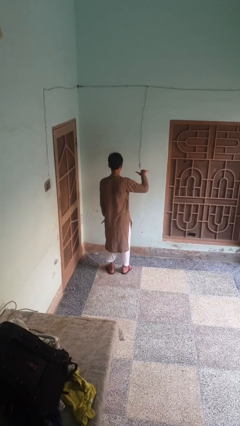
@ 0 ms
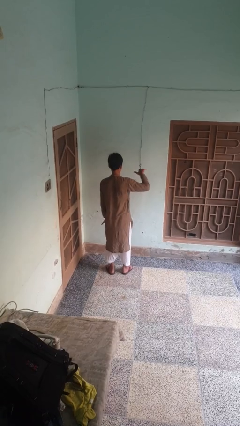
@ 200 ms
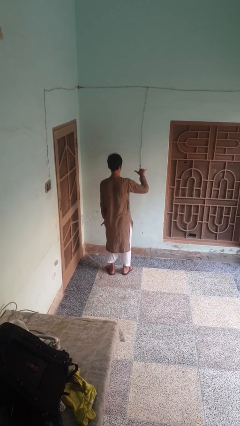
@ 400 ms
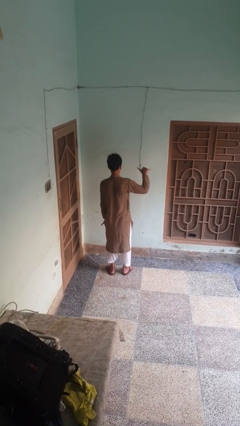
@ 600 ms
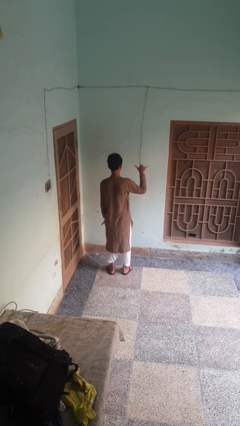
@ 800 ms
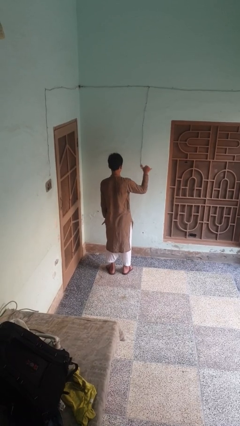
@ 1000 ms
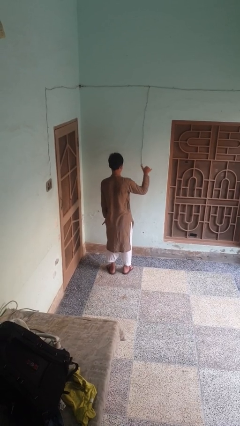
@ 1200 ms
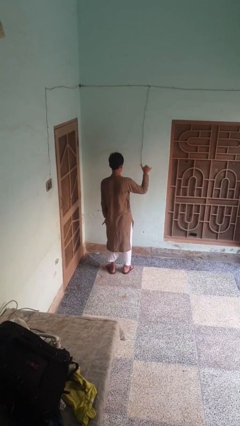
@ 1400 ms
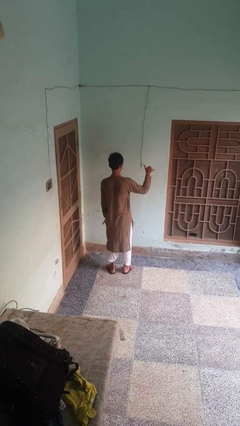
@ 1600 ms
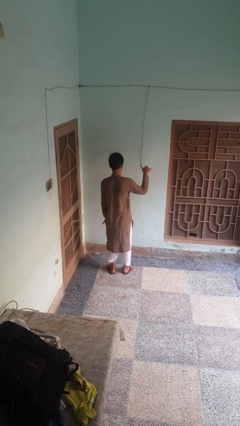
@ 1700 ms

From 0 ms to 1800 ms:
person gestures hang loose

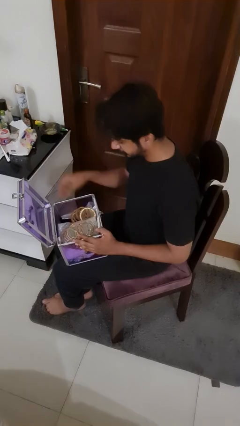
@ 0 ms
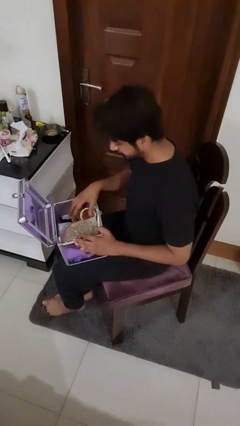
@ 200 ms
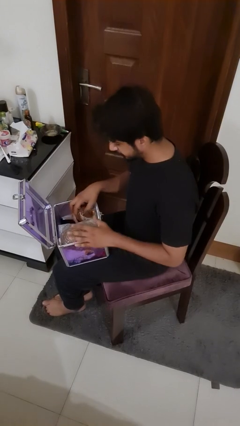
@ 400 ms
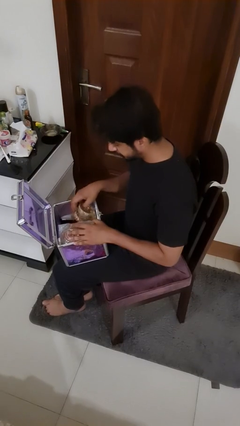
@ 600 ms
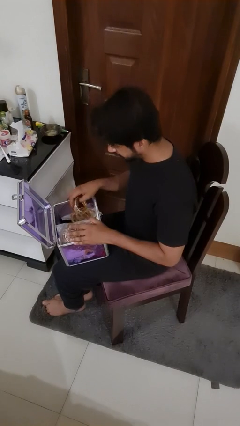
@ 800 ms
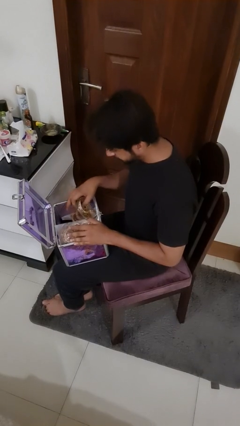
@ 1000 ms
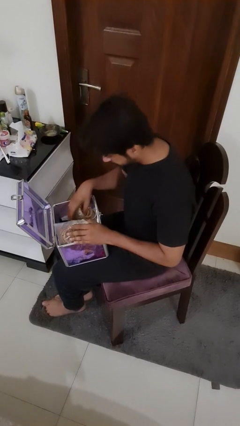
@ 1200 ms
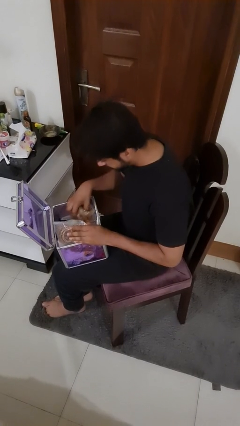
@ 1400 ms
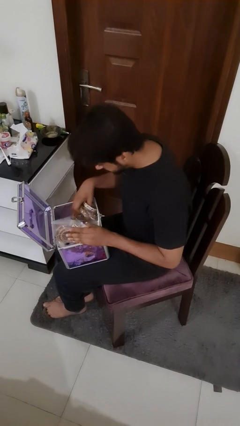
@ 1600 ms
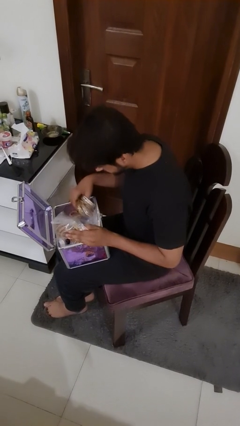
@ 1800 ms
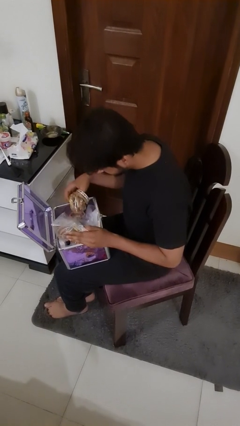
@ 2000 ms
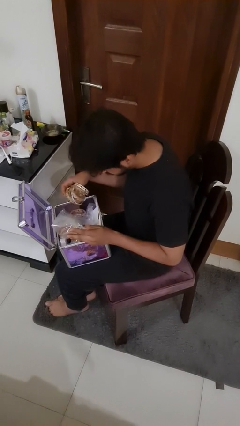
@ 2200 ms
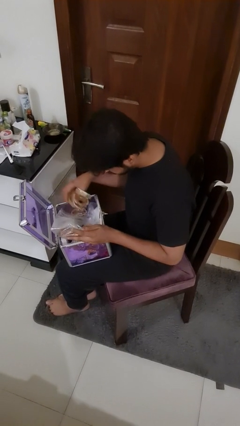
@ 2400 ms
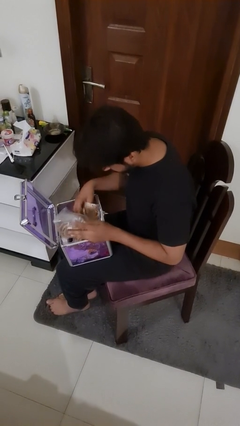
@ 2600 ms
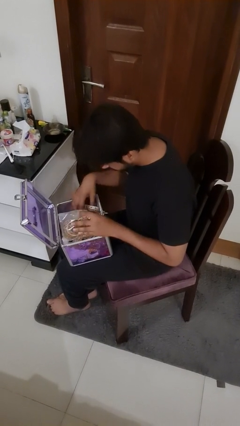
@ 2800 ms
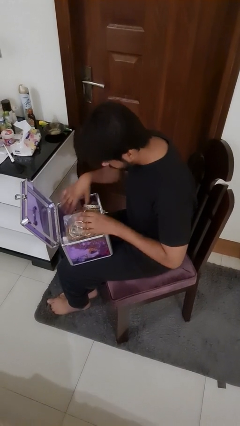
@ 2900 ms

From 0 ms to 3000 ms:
person searches jewelry box

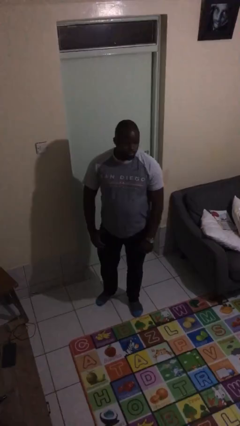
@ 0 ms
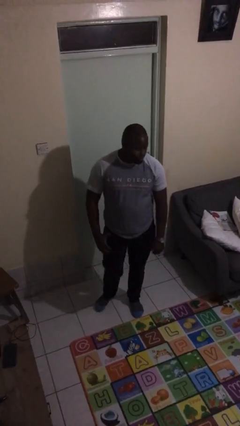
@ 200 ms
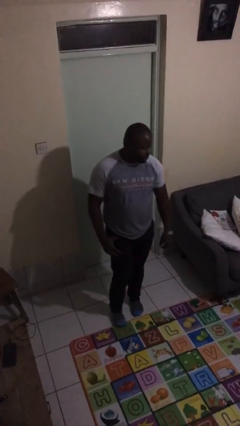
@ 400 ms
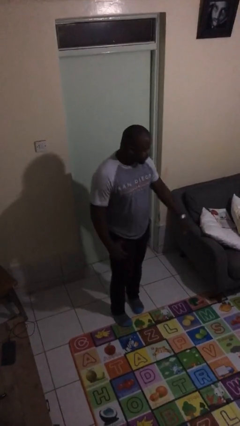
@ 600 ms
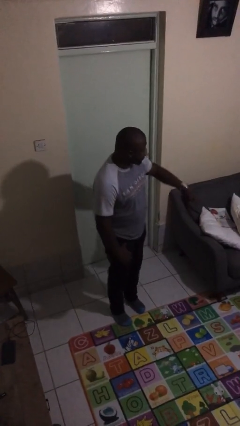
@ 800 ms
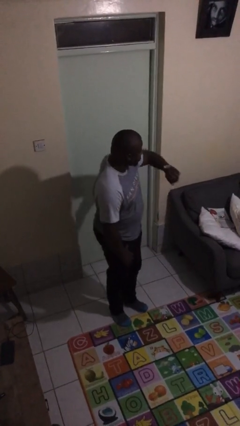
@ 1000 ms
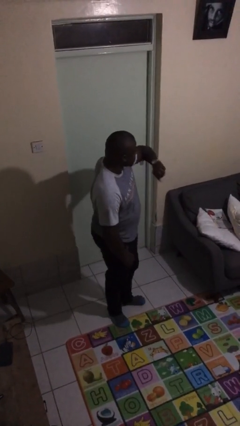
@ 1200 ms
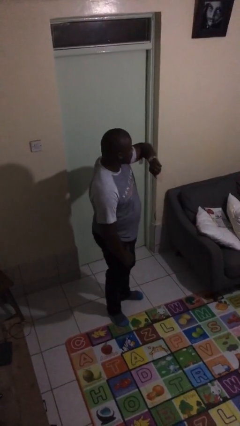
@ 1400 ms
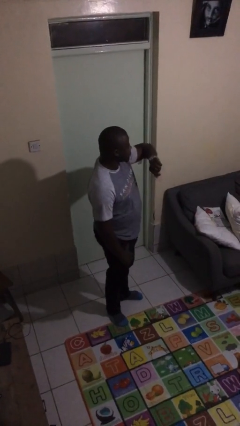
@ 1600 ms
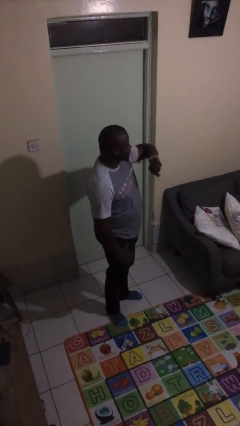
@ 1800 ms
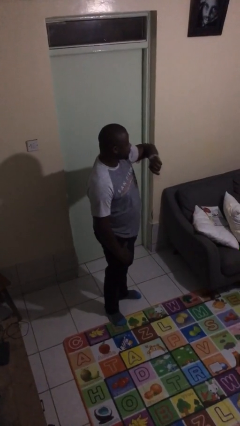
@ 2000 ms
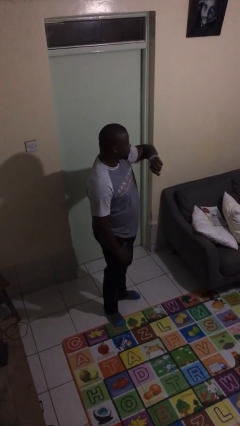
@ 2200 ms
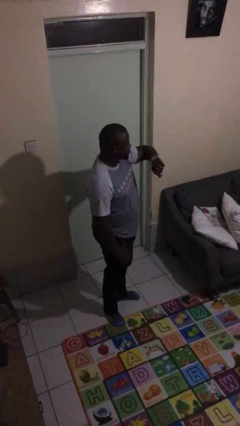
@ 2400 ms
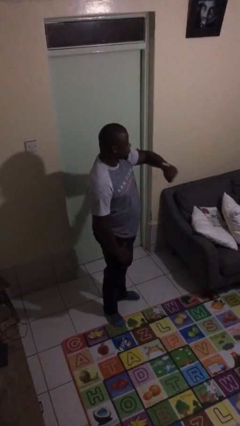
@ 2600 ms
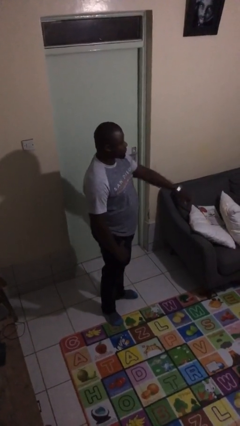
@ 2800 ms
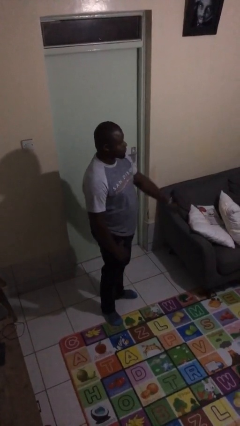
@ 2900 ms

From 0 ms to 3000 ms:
person looks at wristwatch

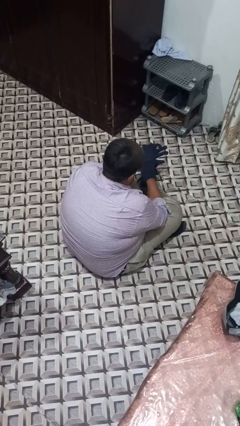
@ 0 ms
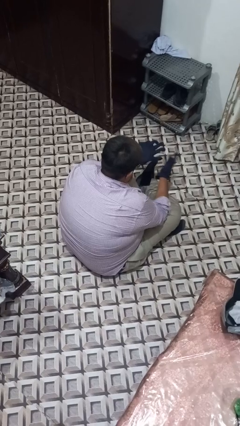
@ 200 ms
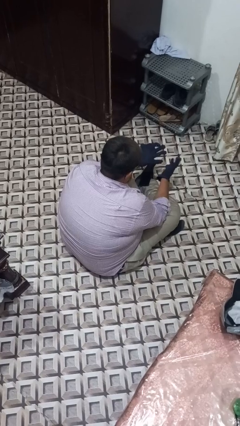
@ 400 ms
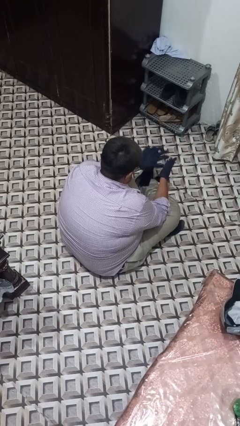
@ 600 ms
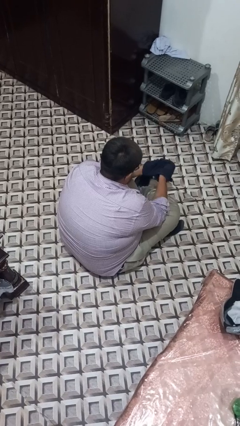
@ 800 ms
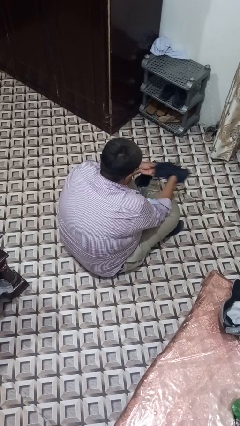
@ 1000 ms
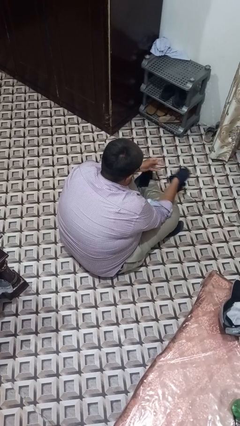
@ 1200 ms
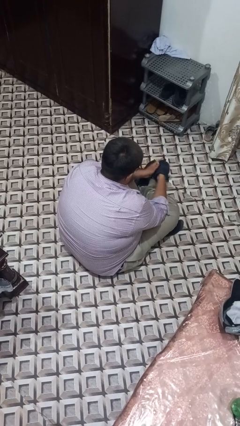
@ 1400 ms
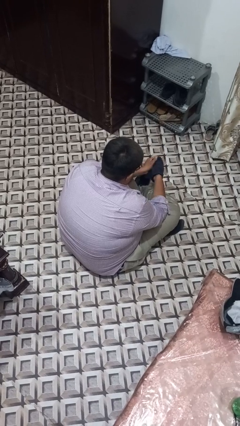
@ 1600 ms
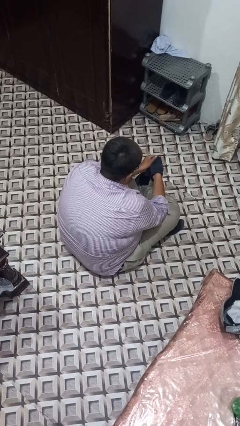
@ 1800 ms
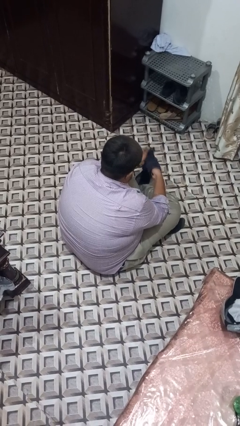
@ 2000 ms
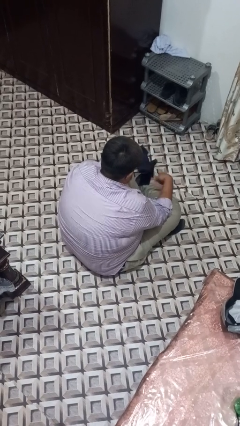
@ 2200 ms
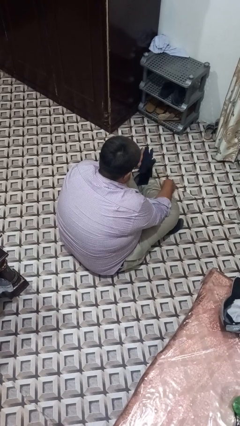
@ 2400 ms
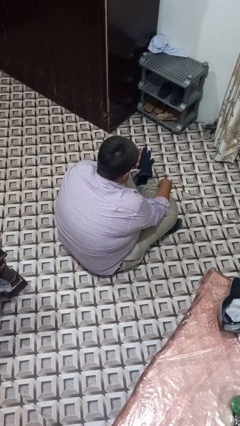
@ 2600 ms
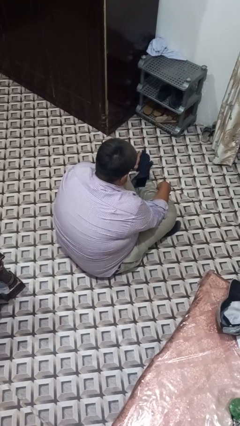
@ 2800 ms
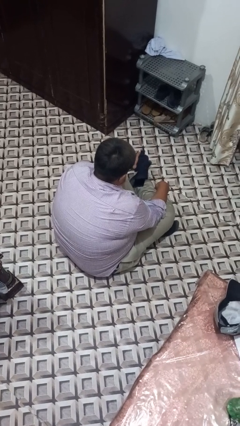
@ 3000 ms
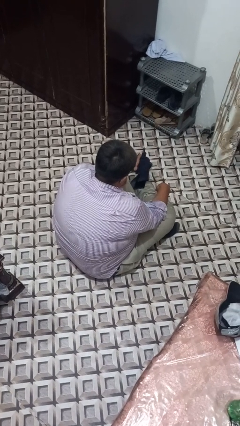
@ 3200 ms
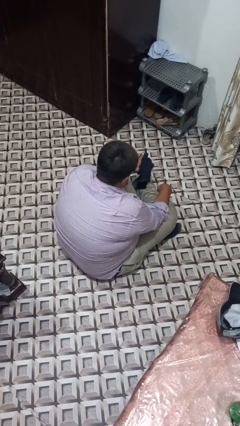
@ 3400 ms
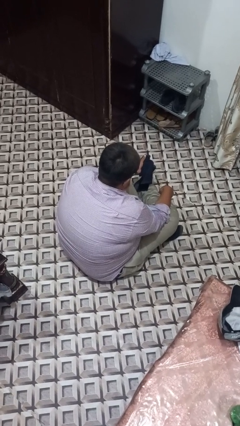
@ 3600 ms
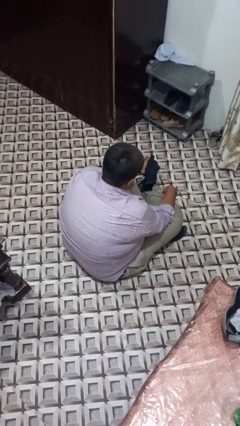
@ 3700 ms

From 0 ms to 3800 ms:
person takes off gloves

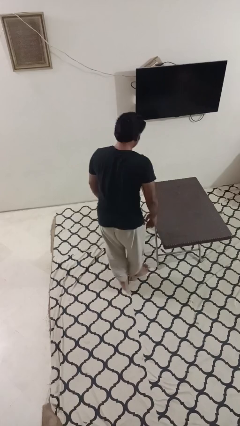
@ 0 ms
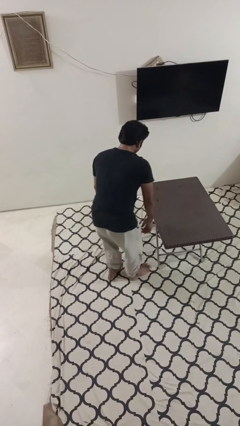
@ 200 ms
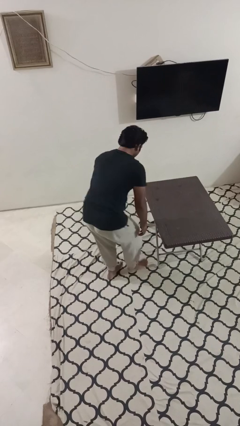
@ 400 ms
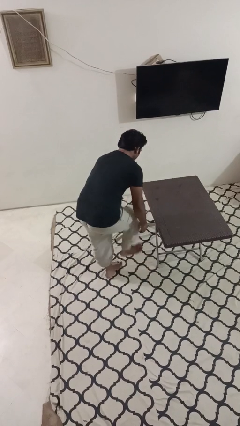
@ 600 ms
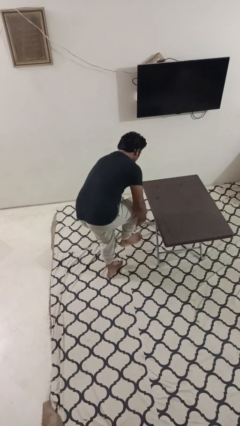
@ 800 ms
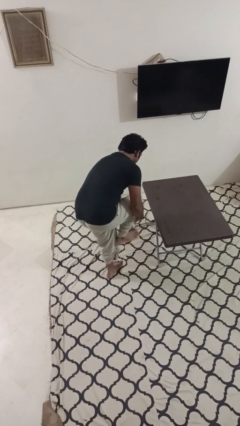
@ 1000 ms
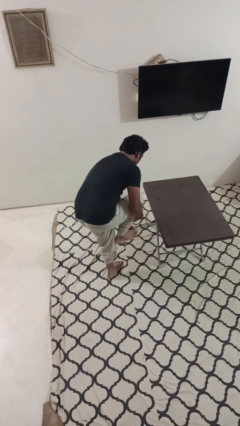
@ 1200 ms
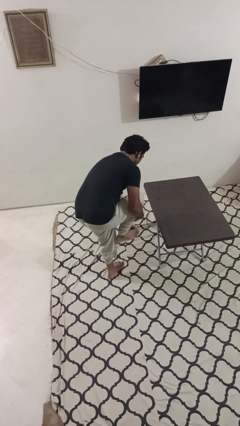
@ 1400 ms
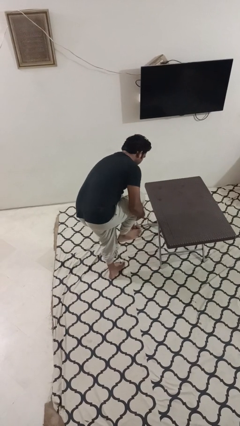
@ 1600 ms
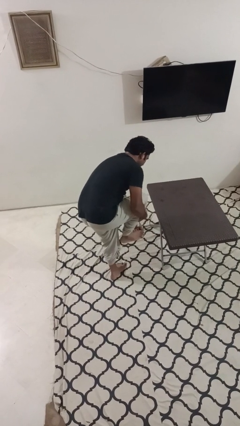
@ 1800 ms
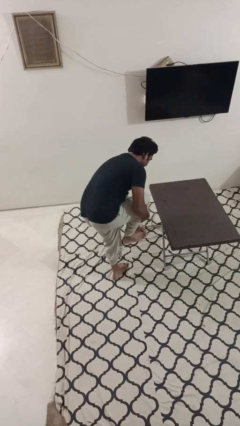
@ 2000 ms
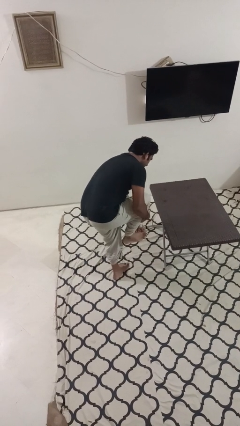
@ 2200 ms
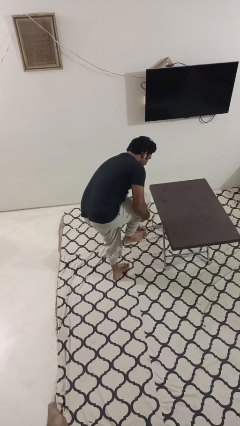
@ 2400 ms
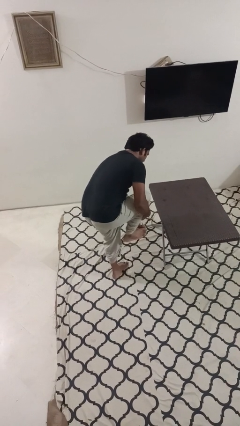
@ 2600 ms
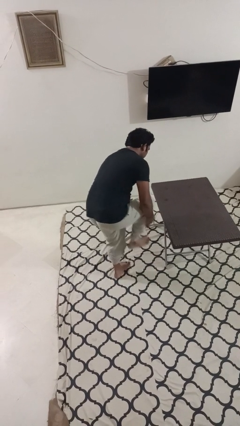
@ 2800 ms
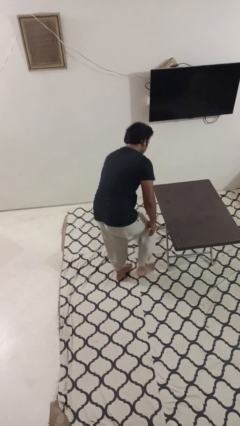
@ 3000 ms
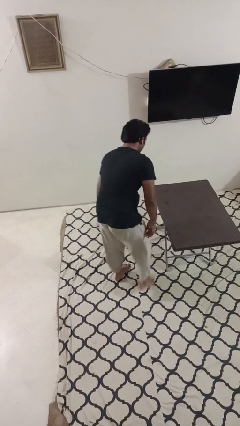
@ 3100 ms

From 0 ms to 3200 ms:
person stubs toe

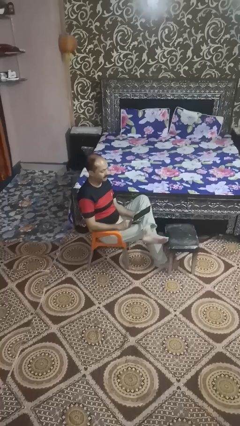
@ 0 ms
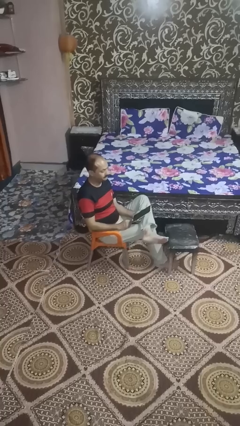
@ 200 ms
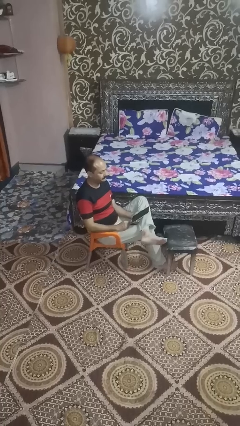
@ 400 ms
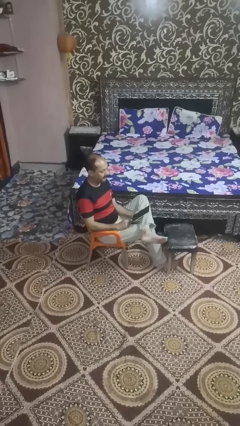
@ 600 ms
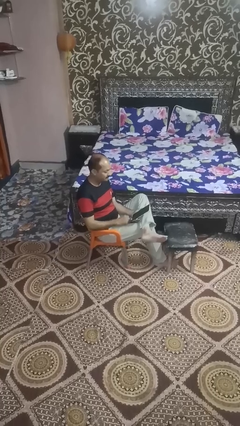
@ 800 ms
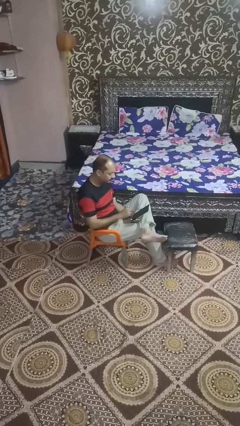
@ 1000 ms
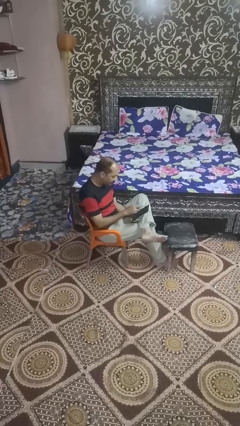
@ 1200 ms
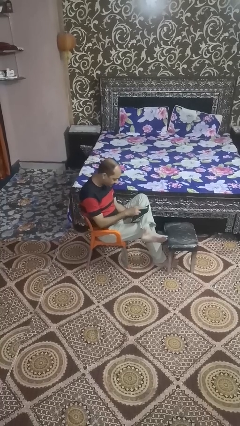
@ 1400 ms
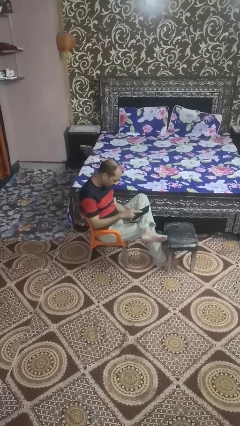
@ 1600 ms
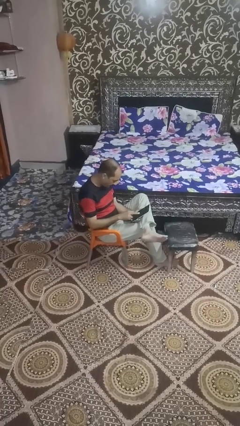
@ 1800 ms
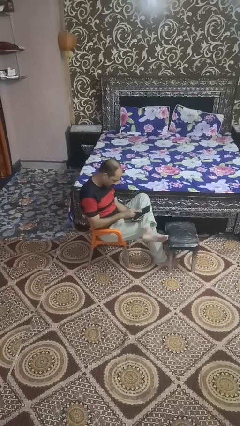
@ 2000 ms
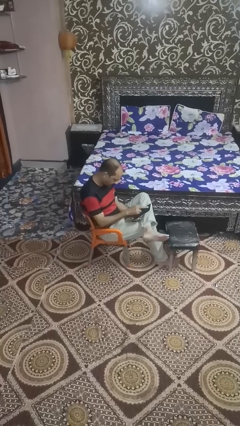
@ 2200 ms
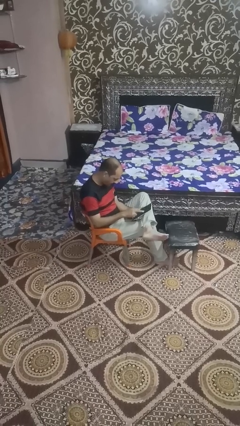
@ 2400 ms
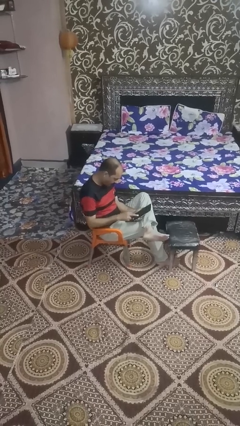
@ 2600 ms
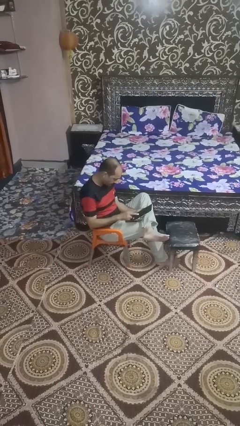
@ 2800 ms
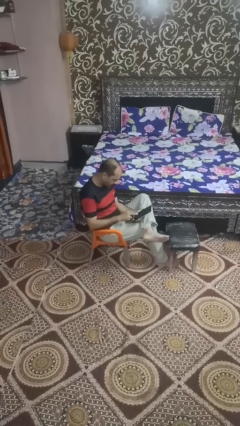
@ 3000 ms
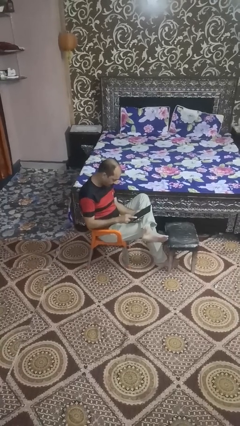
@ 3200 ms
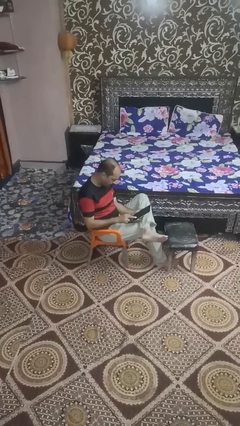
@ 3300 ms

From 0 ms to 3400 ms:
person interacts with tablet
